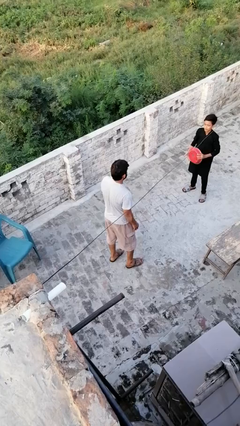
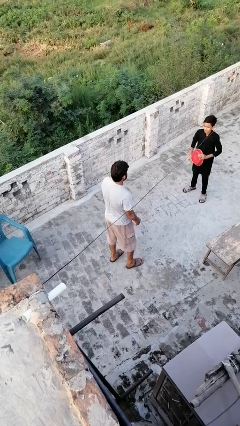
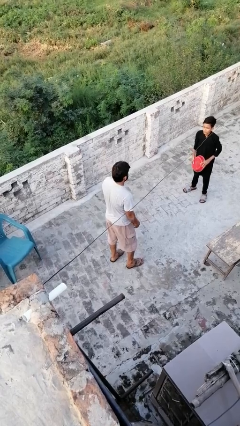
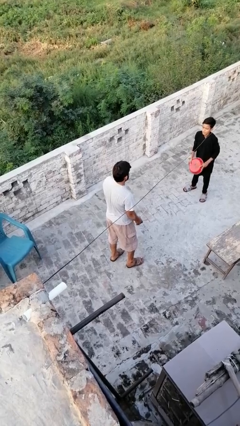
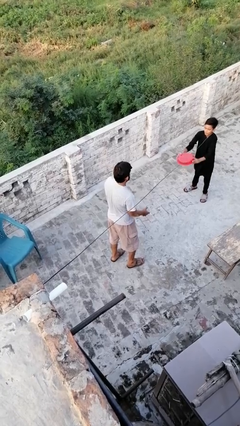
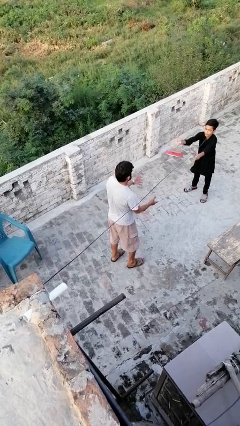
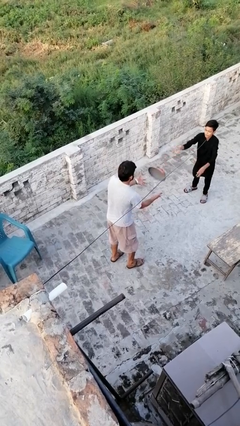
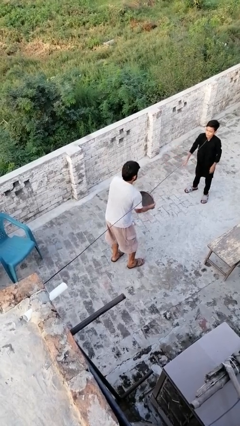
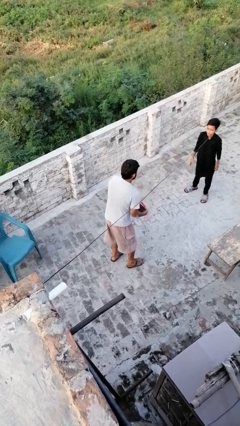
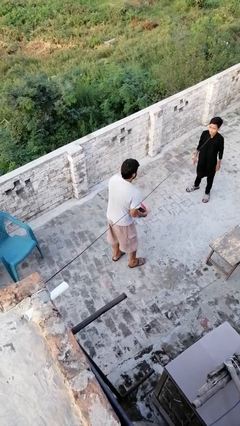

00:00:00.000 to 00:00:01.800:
person catches object from person

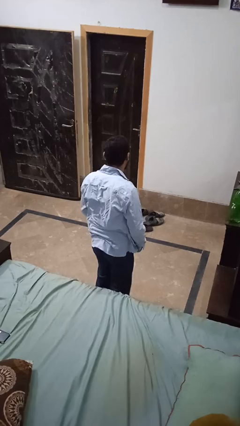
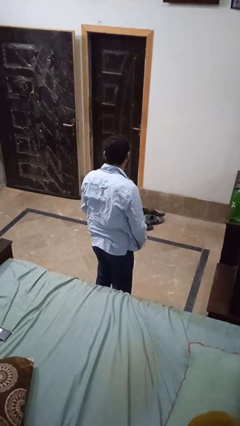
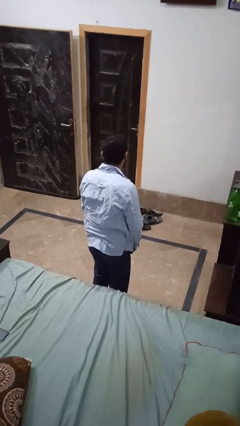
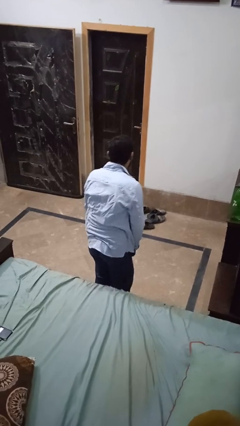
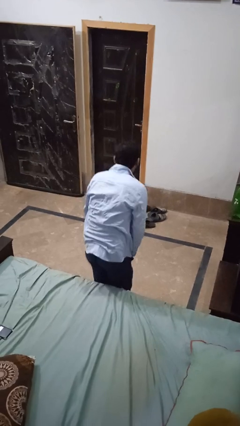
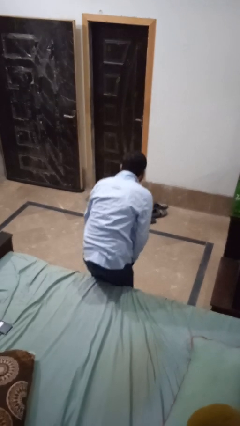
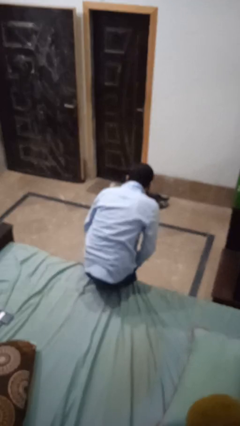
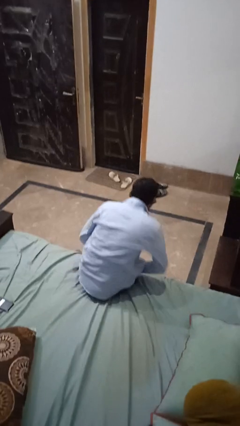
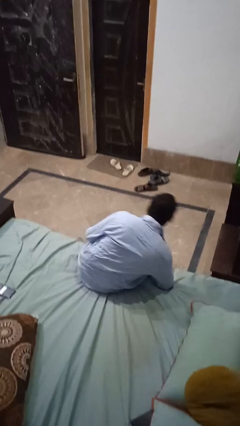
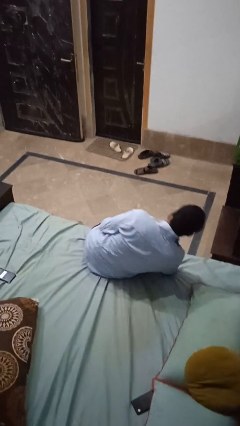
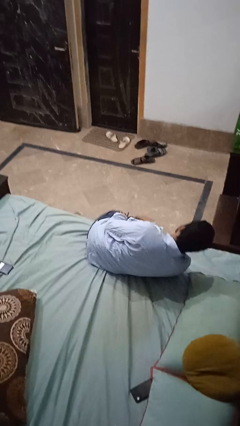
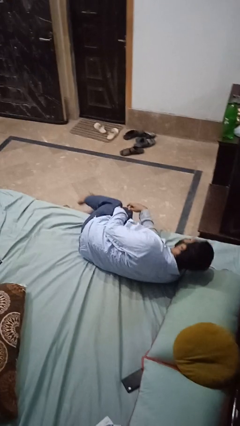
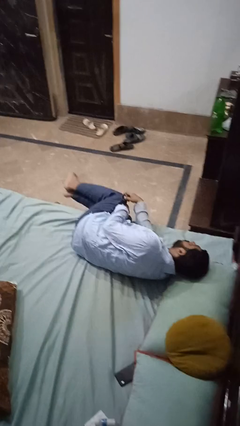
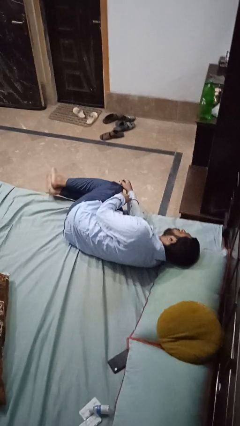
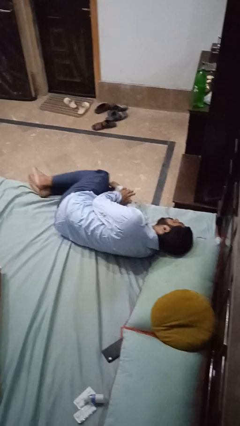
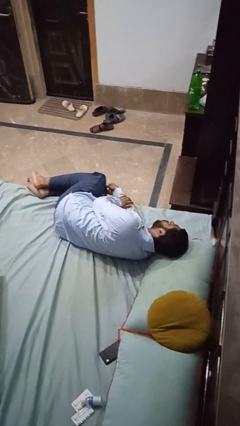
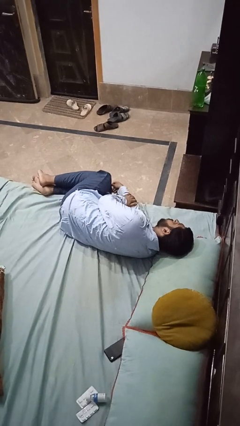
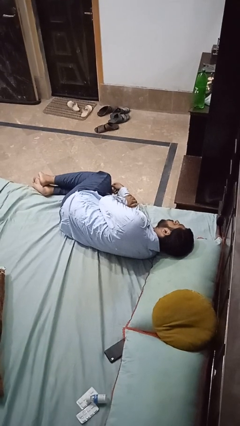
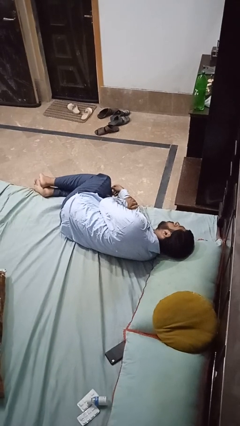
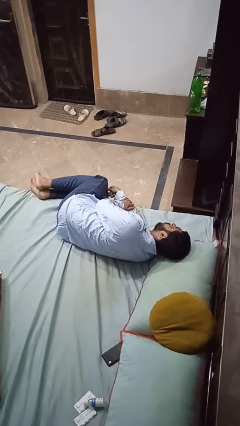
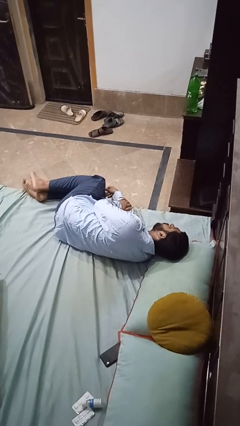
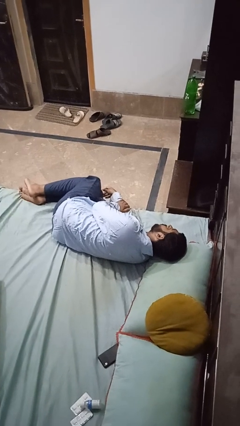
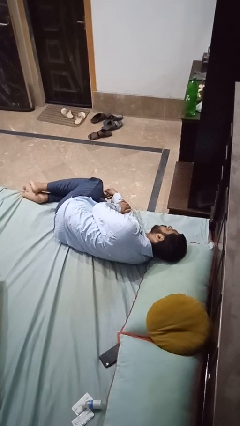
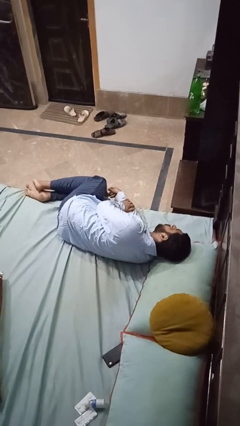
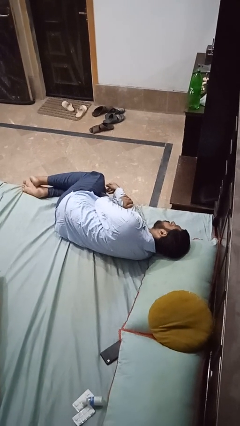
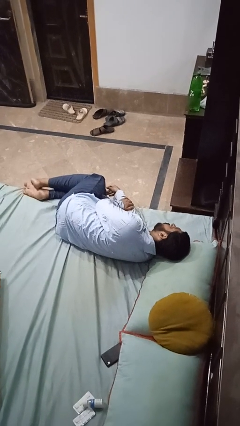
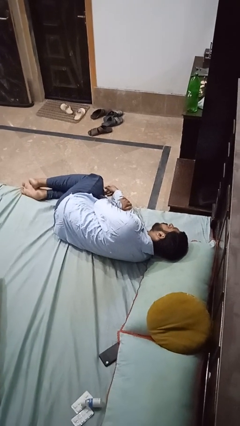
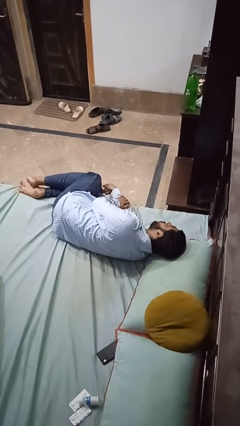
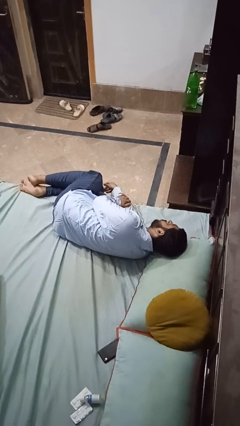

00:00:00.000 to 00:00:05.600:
person lies down on bed

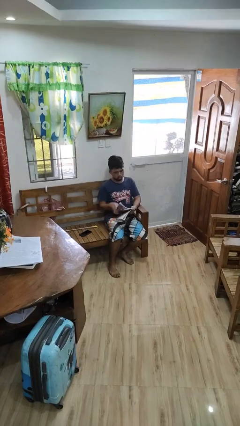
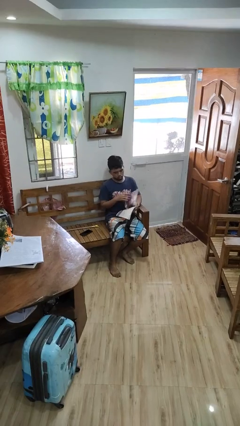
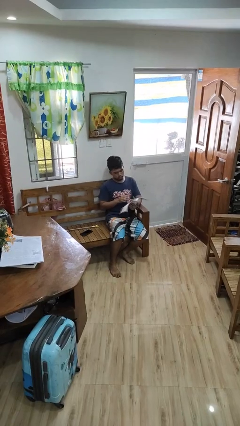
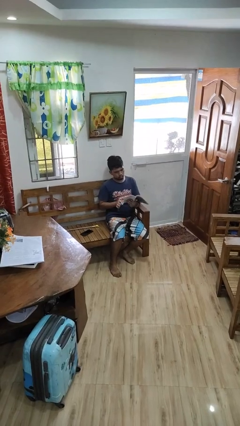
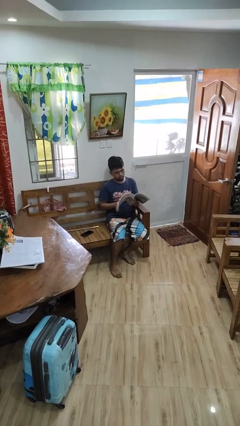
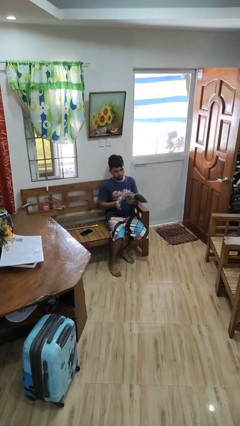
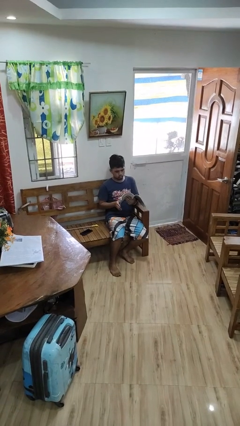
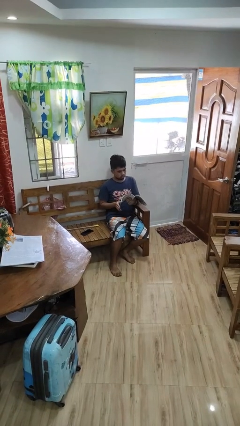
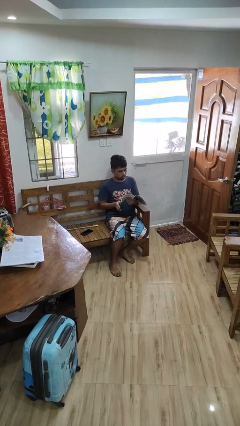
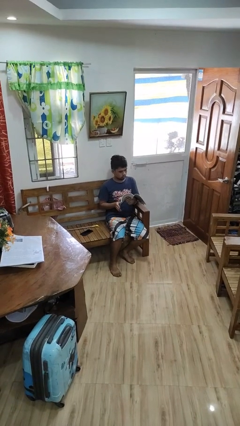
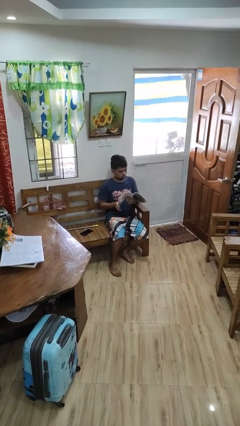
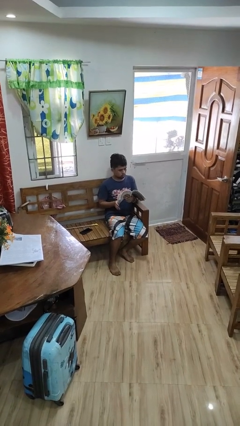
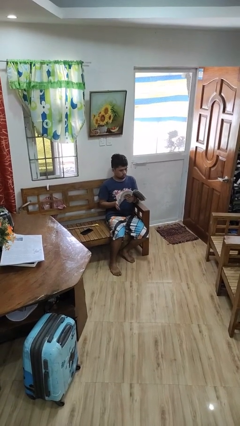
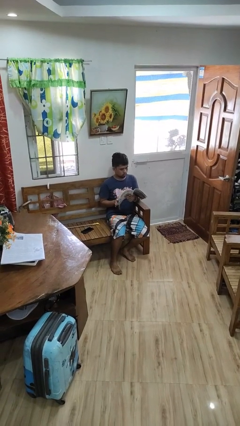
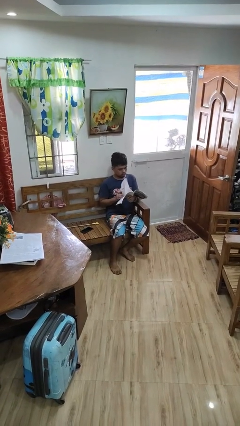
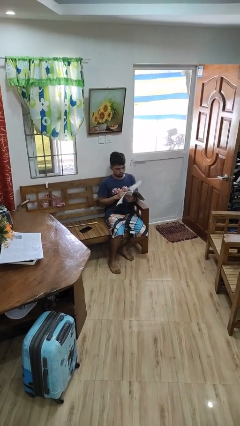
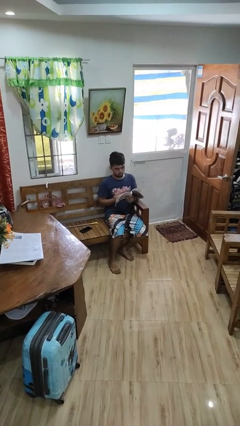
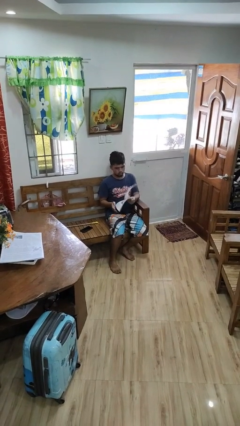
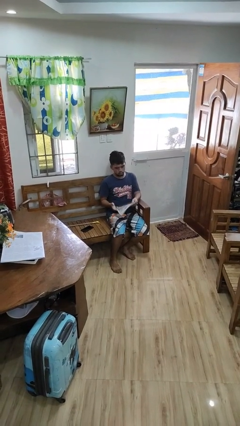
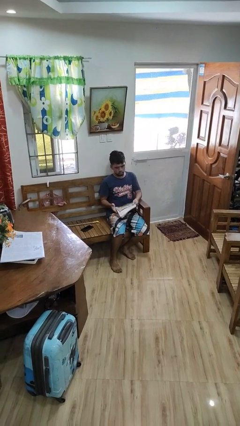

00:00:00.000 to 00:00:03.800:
person reads magazine

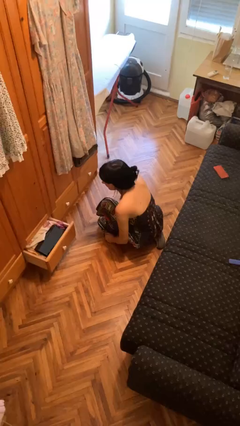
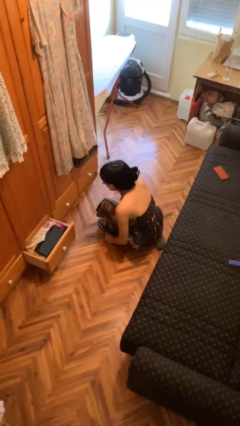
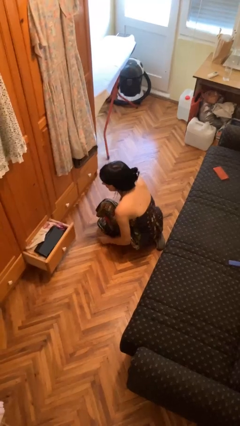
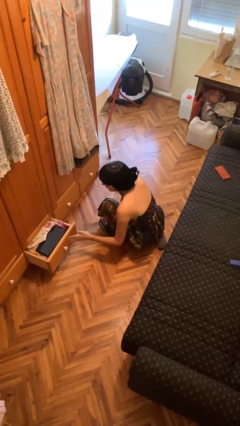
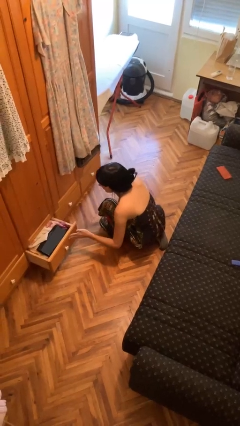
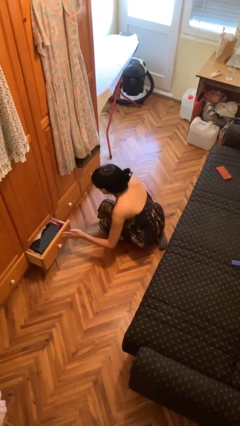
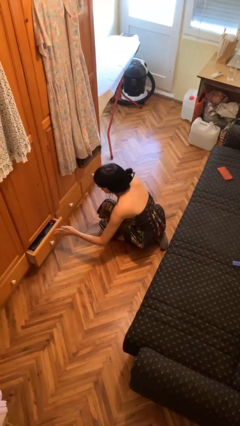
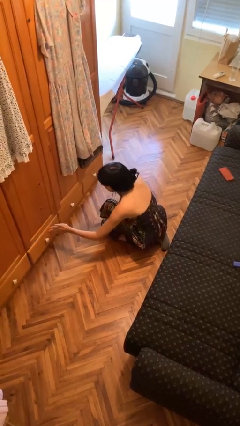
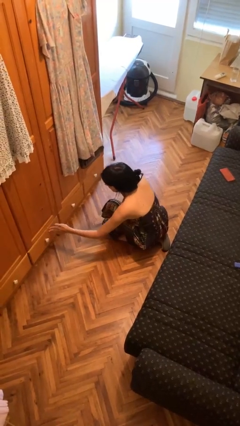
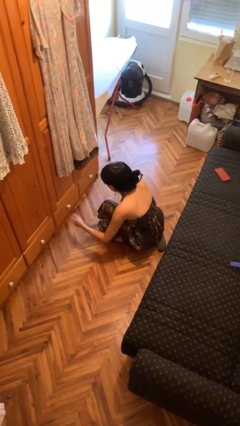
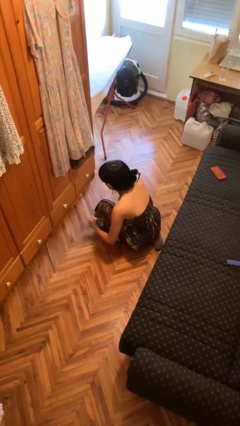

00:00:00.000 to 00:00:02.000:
person closes dresser drawer

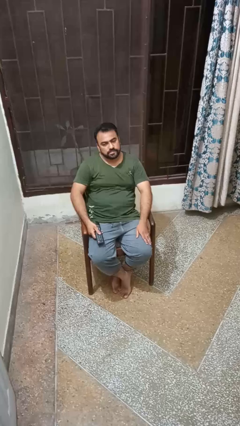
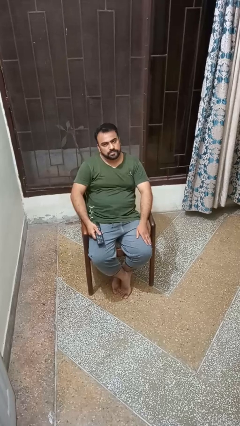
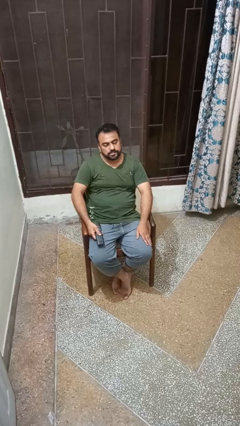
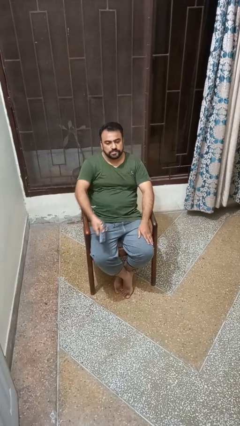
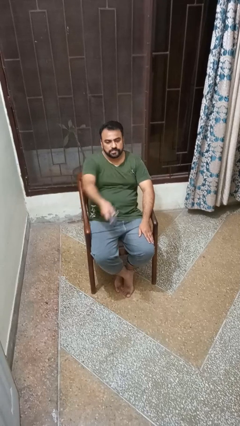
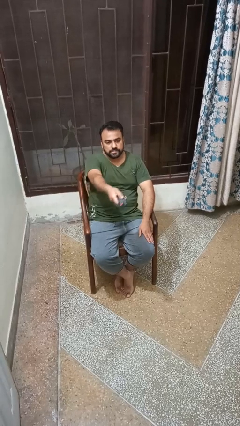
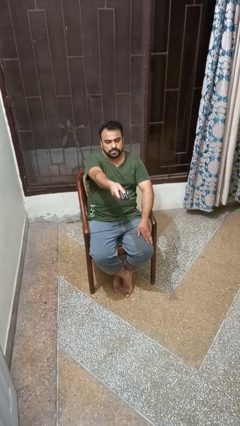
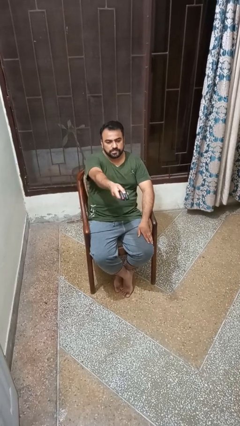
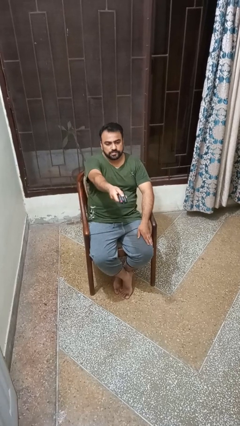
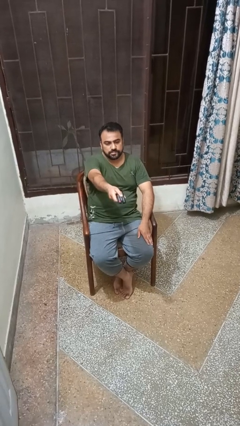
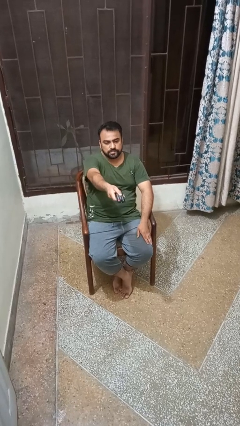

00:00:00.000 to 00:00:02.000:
person uses television remote

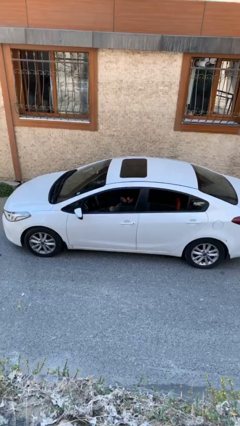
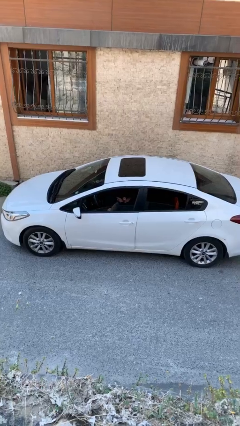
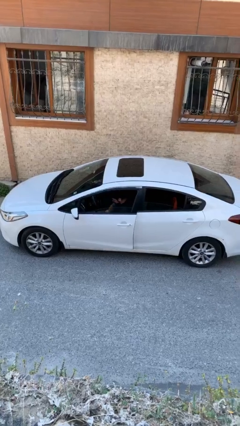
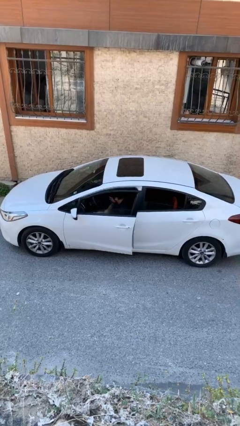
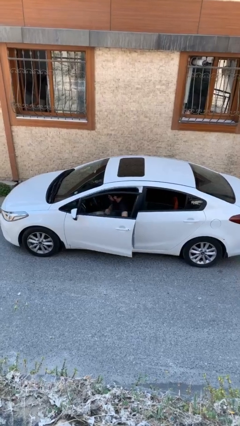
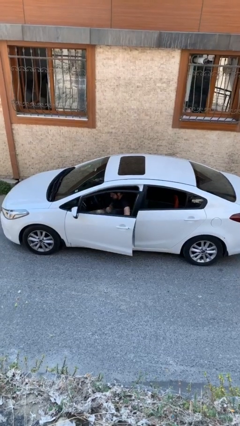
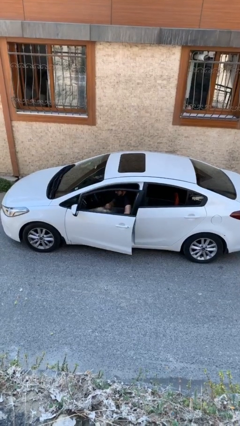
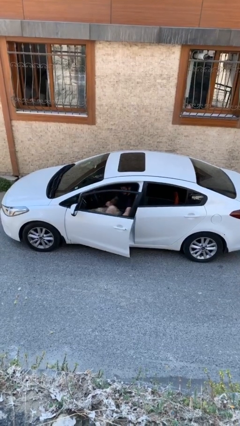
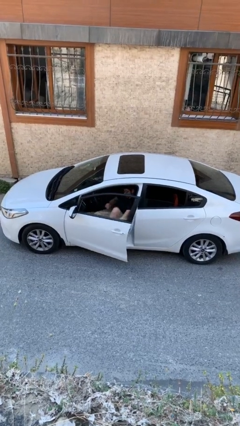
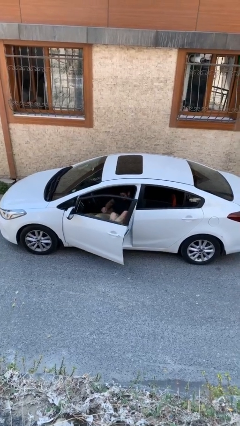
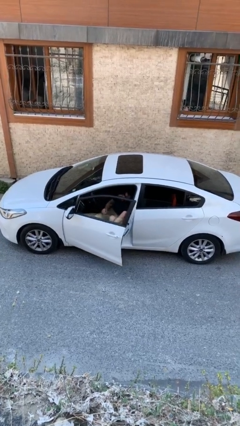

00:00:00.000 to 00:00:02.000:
person opens car door
